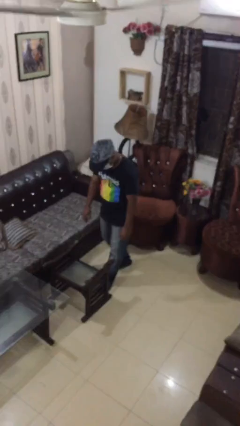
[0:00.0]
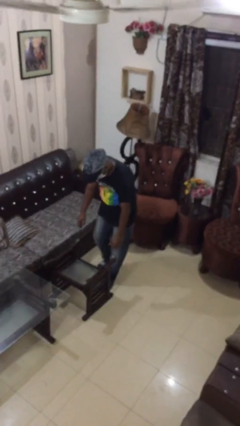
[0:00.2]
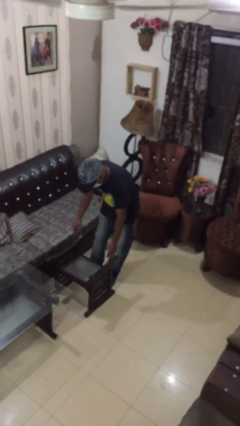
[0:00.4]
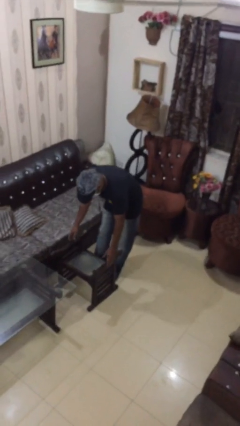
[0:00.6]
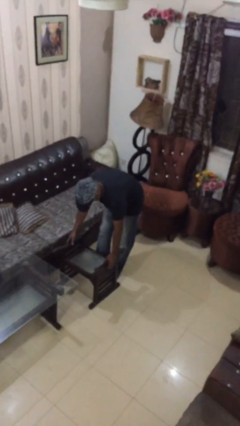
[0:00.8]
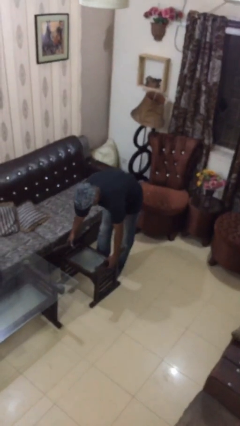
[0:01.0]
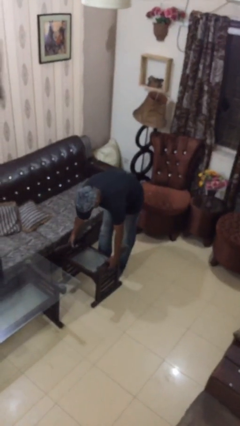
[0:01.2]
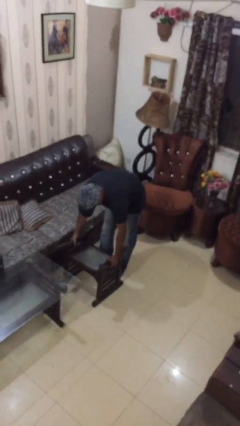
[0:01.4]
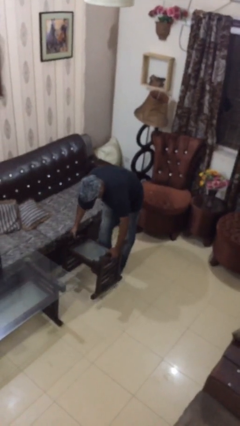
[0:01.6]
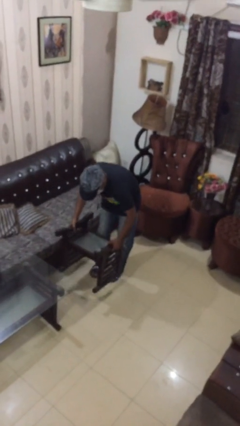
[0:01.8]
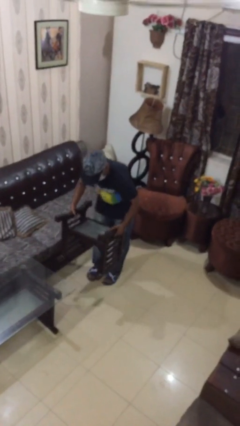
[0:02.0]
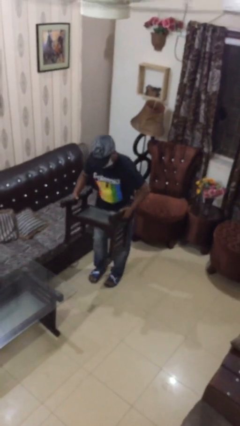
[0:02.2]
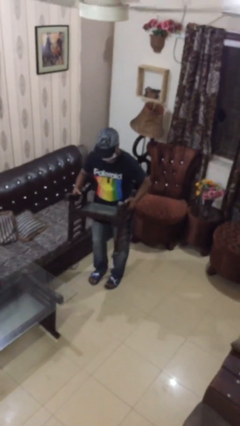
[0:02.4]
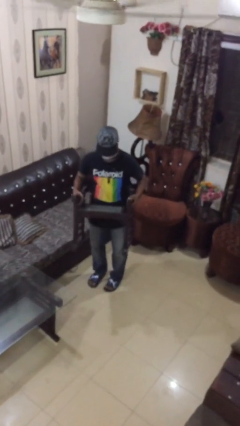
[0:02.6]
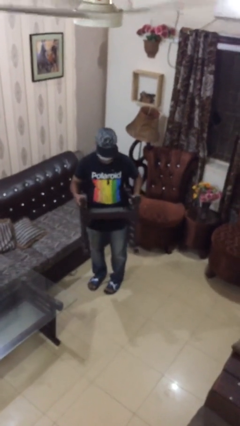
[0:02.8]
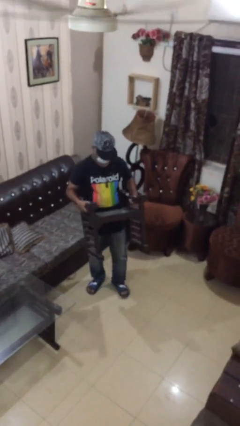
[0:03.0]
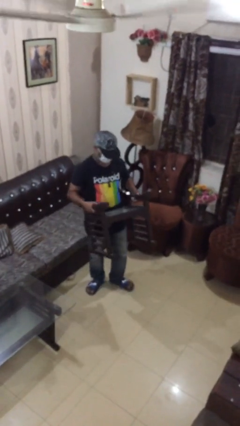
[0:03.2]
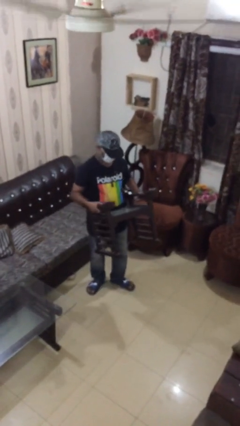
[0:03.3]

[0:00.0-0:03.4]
person picks up object from floor

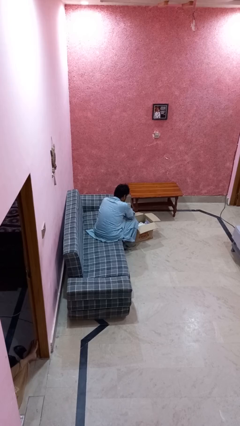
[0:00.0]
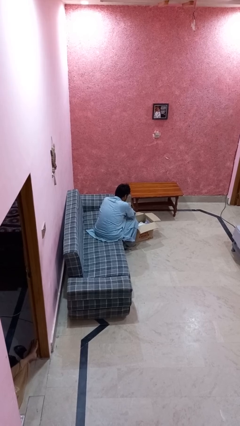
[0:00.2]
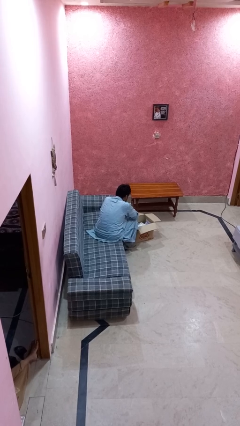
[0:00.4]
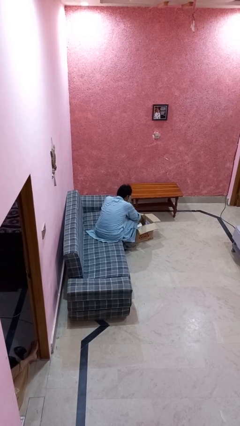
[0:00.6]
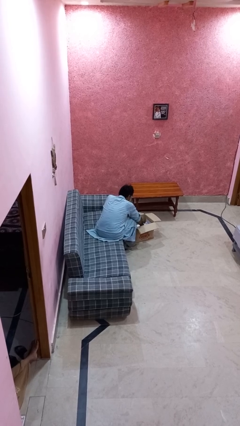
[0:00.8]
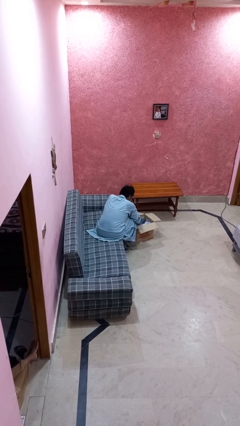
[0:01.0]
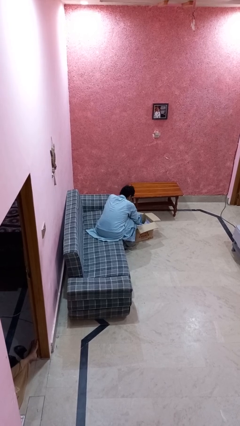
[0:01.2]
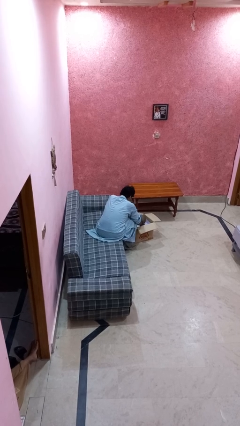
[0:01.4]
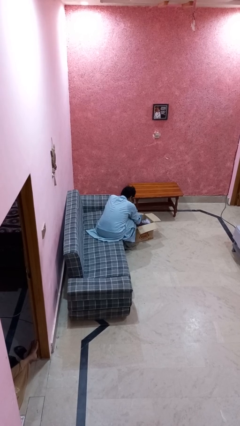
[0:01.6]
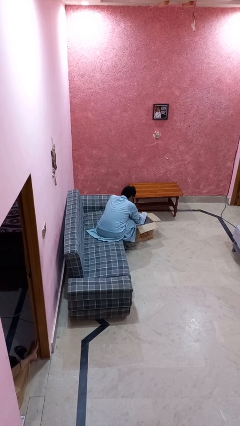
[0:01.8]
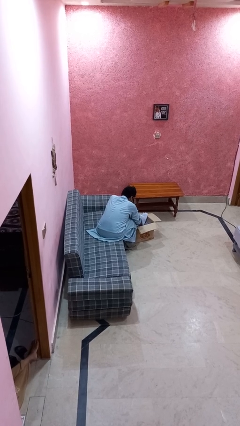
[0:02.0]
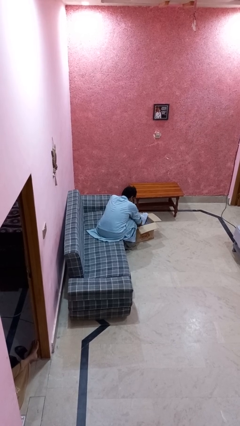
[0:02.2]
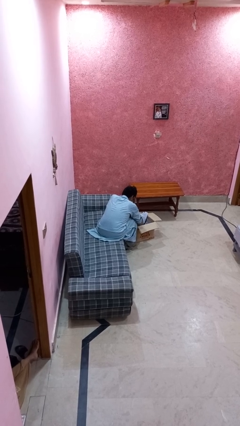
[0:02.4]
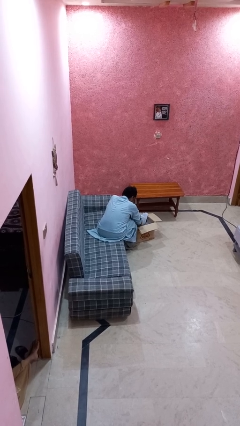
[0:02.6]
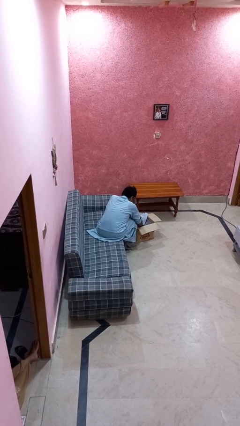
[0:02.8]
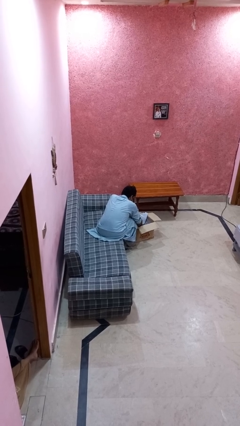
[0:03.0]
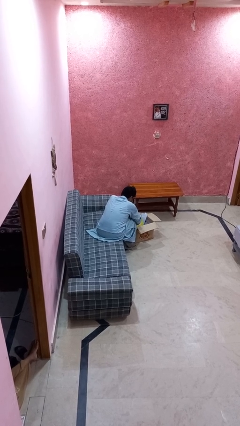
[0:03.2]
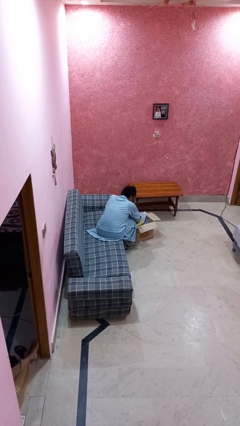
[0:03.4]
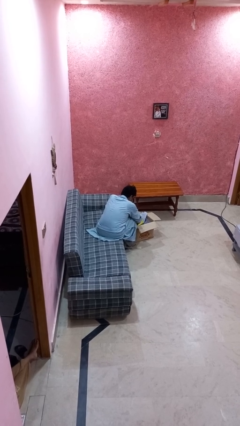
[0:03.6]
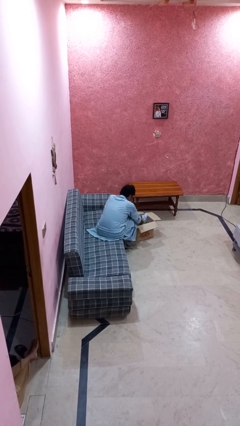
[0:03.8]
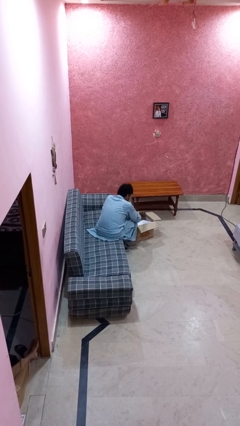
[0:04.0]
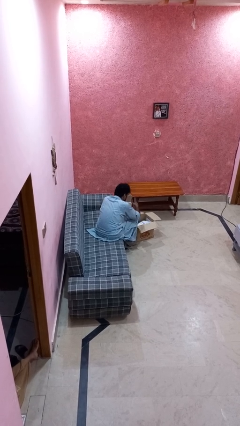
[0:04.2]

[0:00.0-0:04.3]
person searches in box

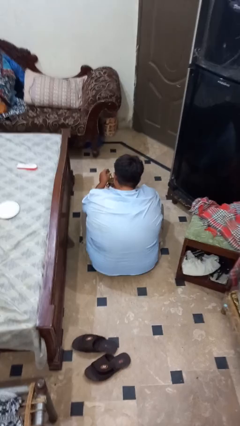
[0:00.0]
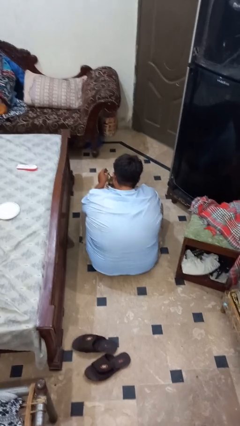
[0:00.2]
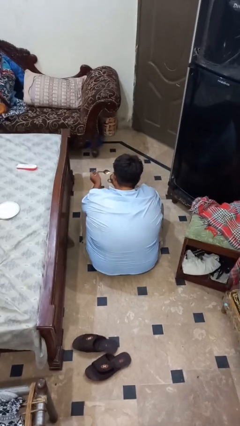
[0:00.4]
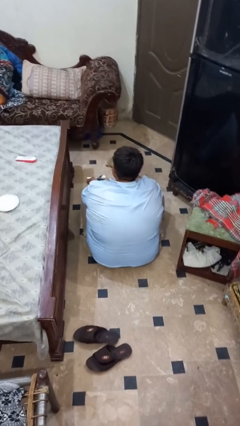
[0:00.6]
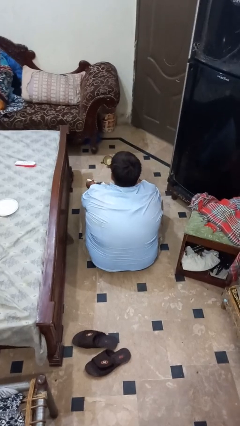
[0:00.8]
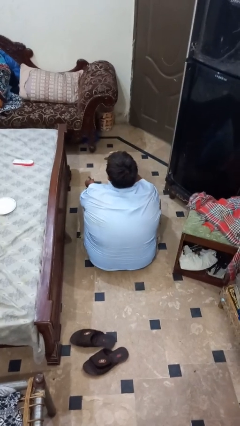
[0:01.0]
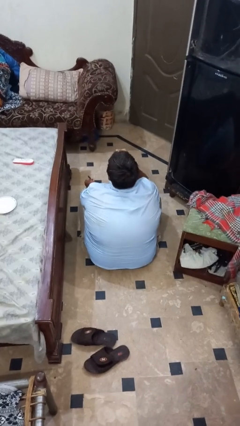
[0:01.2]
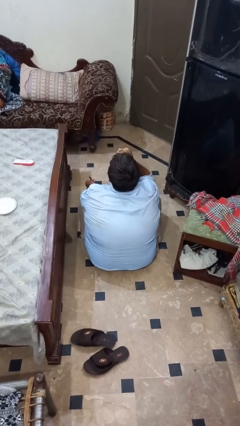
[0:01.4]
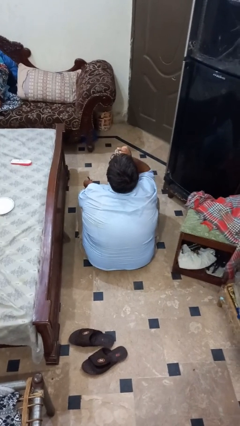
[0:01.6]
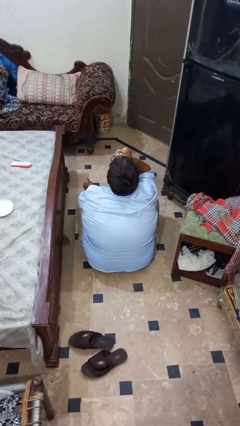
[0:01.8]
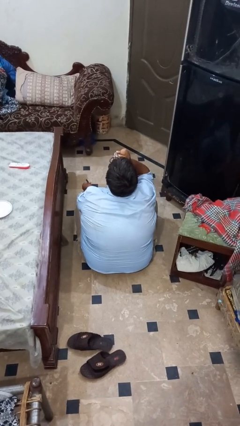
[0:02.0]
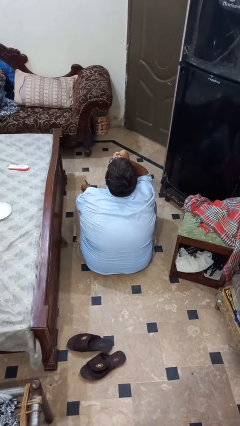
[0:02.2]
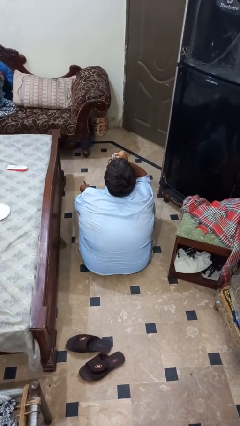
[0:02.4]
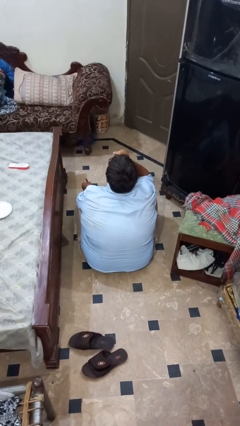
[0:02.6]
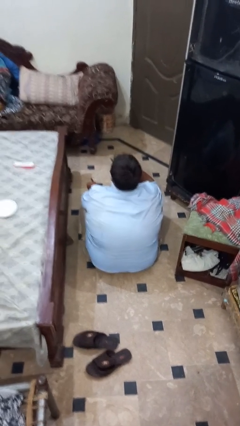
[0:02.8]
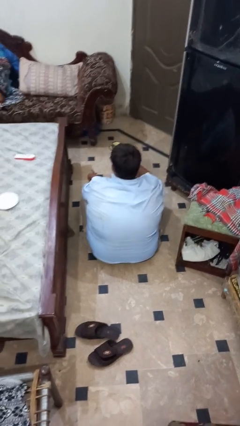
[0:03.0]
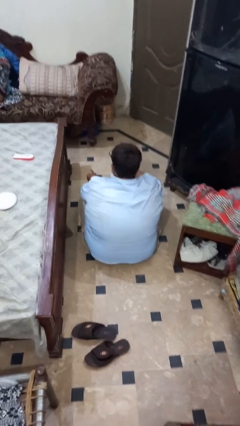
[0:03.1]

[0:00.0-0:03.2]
person drinks from mug

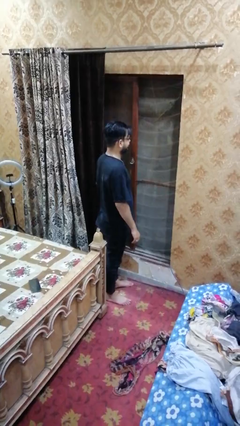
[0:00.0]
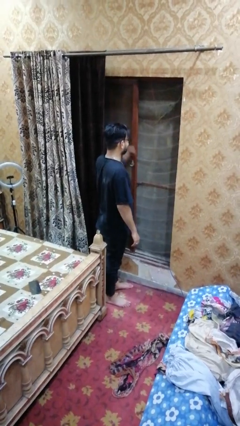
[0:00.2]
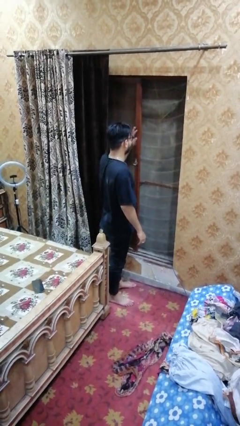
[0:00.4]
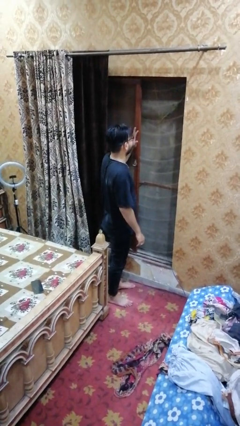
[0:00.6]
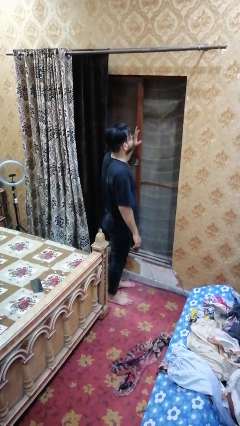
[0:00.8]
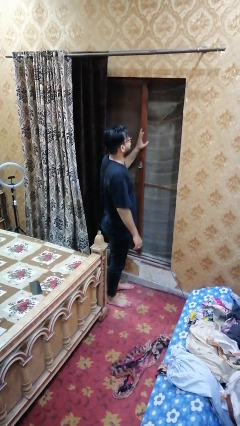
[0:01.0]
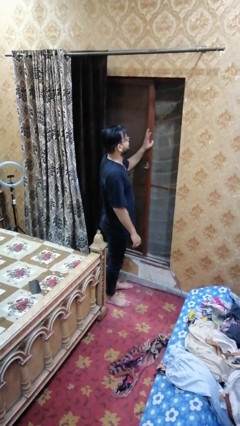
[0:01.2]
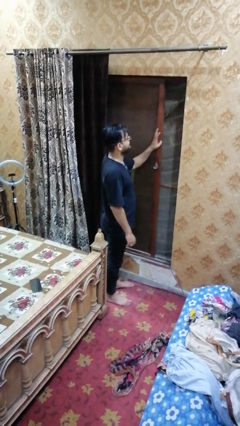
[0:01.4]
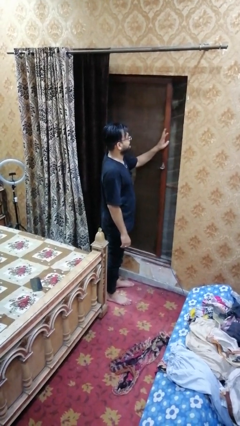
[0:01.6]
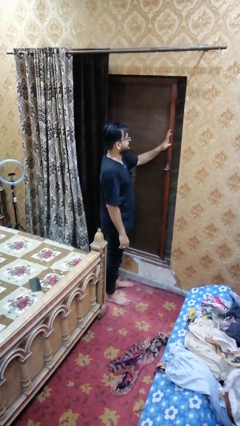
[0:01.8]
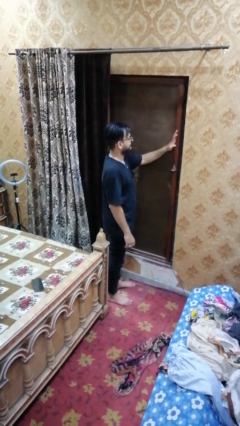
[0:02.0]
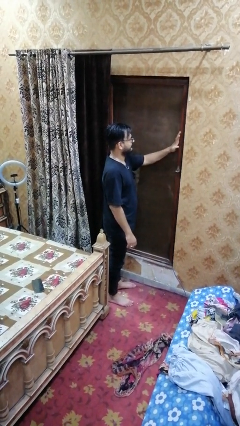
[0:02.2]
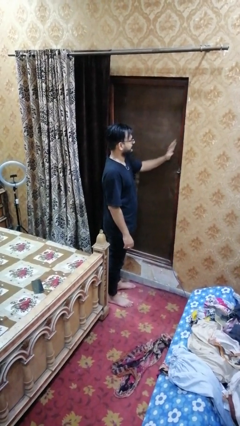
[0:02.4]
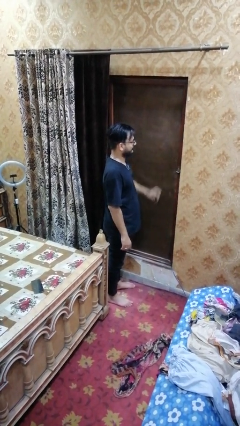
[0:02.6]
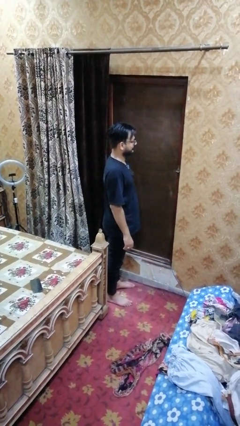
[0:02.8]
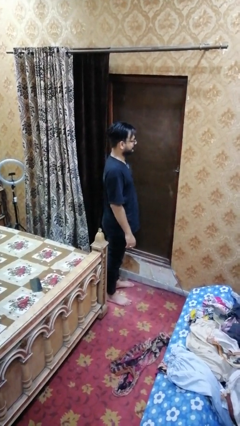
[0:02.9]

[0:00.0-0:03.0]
person closes sliding door

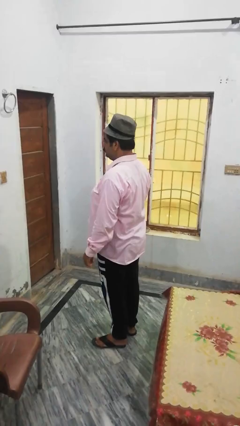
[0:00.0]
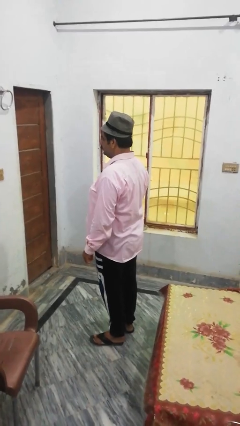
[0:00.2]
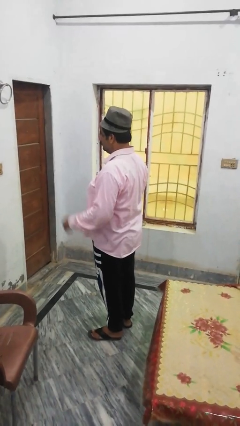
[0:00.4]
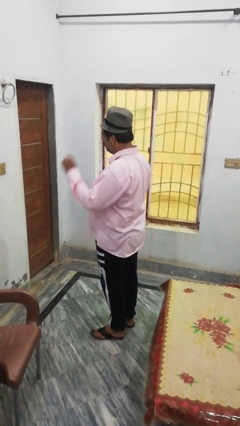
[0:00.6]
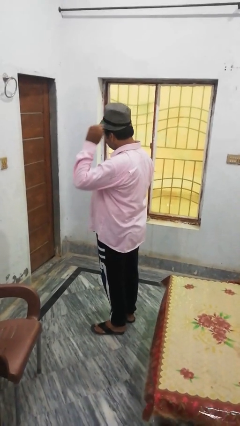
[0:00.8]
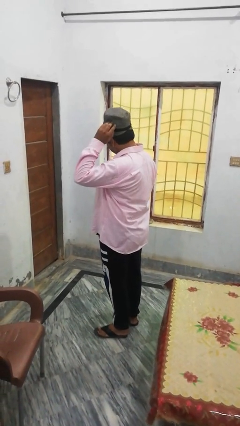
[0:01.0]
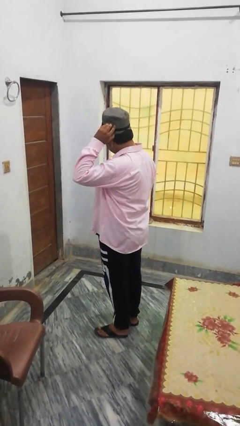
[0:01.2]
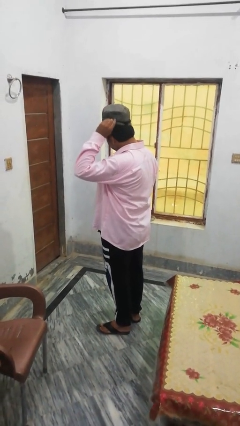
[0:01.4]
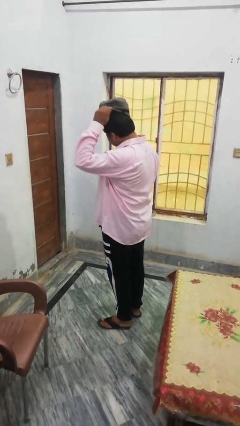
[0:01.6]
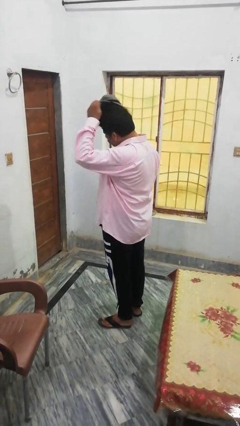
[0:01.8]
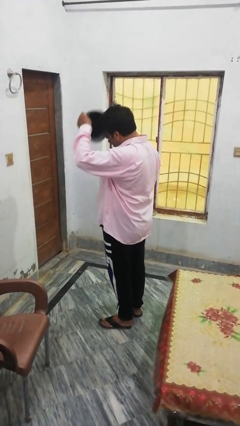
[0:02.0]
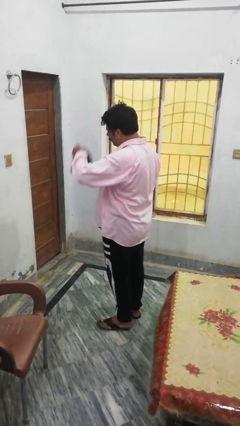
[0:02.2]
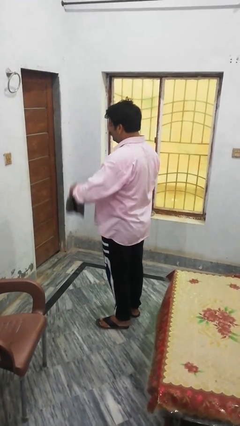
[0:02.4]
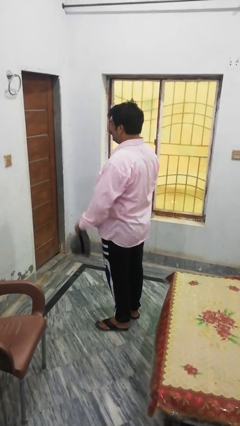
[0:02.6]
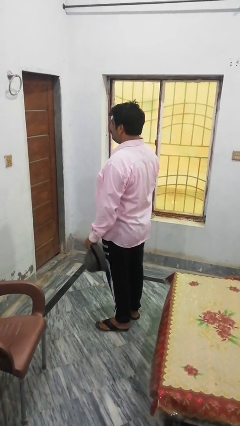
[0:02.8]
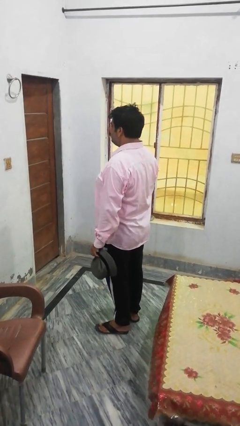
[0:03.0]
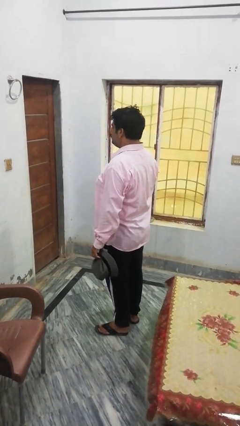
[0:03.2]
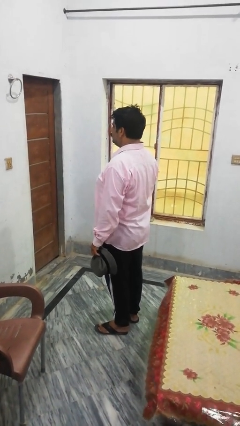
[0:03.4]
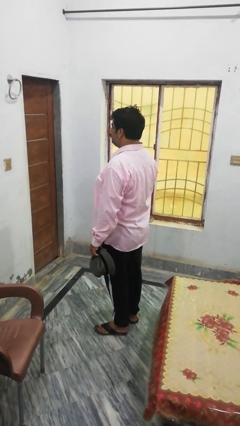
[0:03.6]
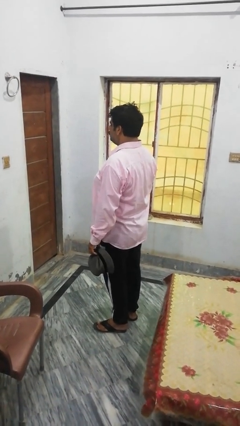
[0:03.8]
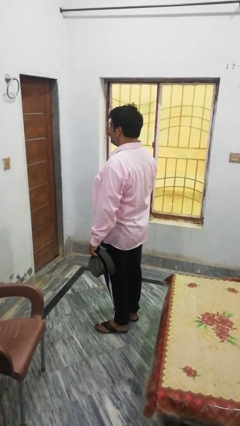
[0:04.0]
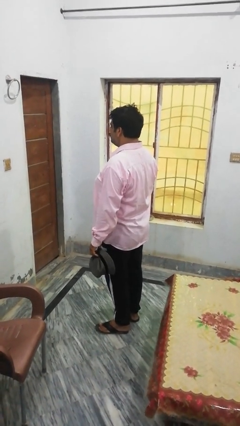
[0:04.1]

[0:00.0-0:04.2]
person takes off hat
